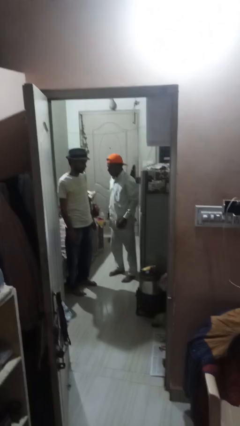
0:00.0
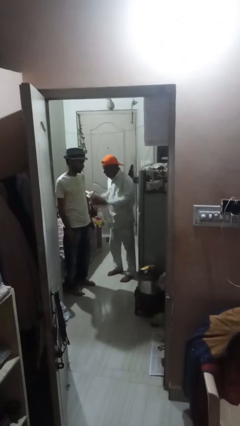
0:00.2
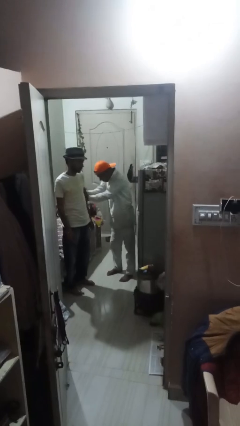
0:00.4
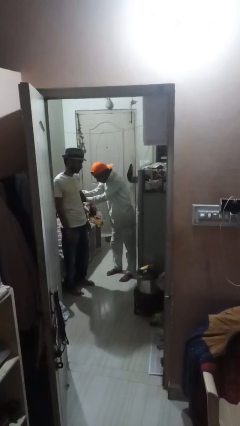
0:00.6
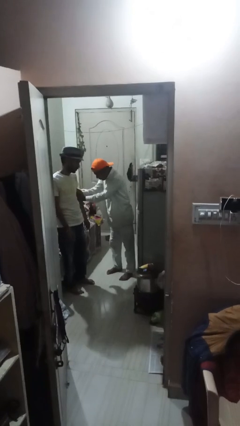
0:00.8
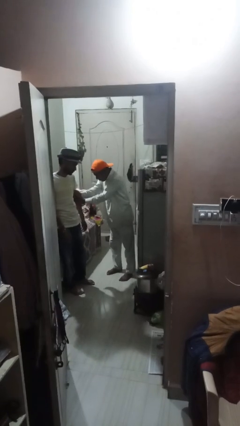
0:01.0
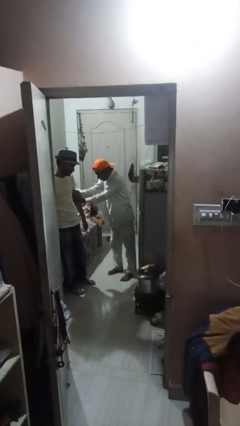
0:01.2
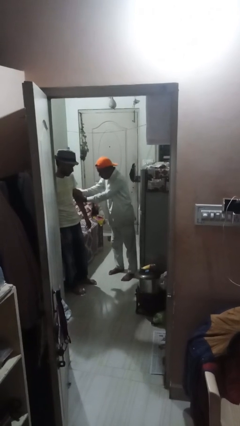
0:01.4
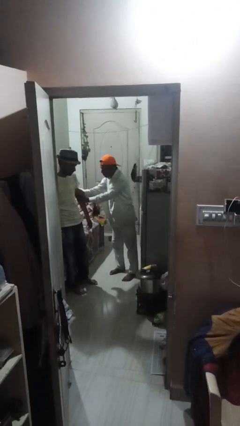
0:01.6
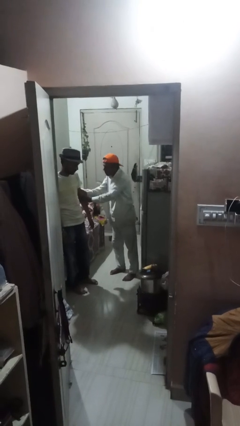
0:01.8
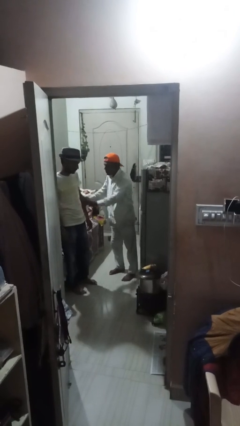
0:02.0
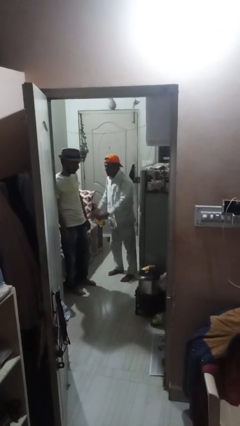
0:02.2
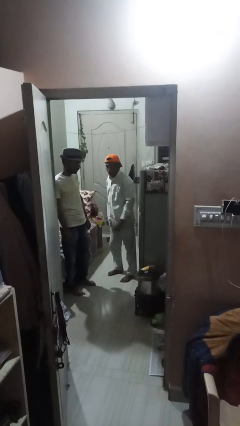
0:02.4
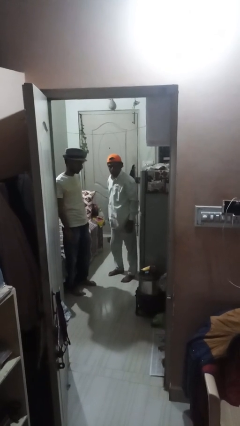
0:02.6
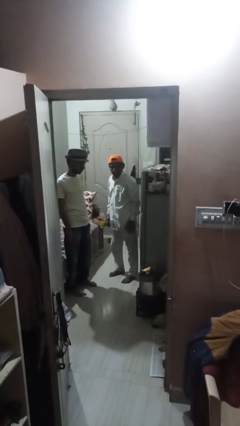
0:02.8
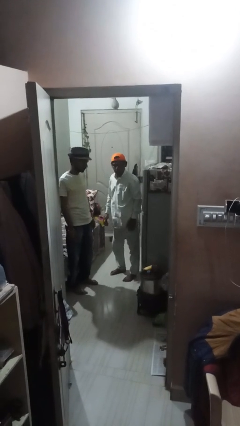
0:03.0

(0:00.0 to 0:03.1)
person shoves person

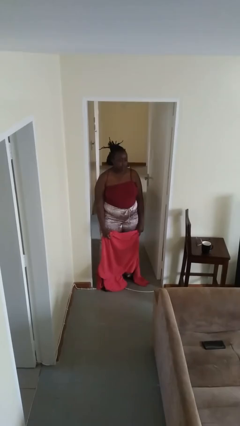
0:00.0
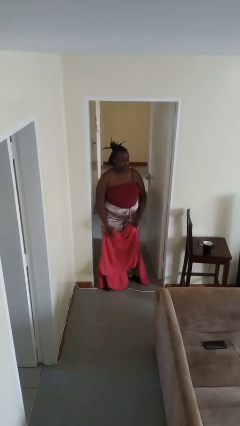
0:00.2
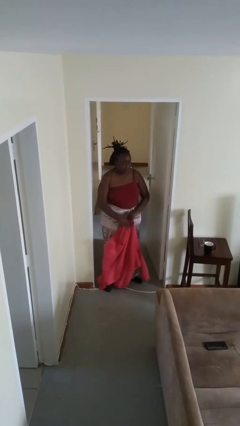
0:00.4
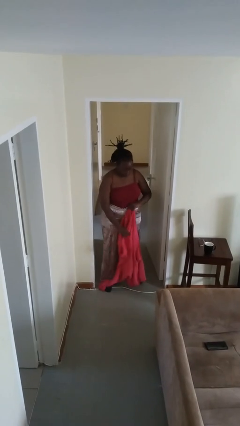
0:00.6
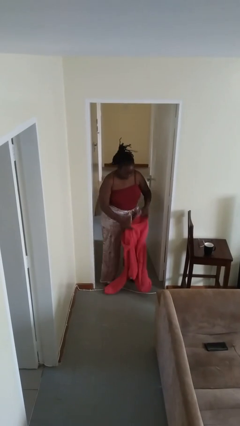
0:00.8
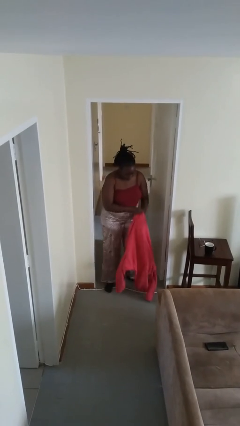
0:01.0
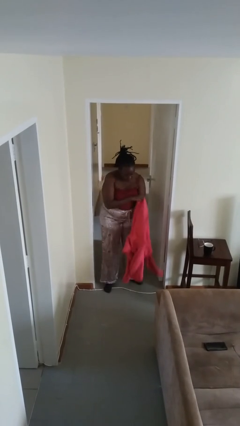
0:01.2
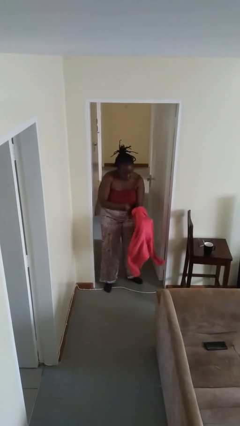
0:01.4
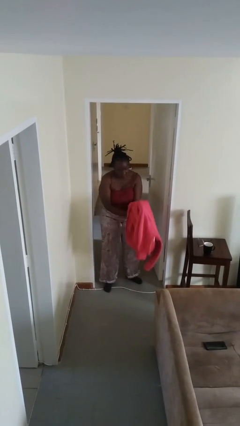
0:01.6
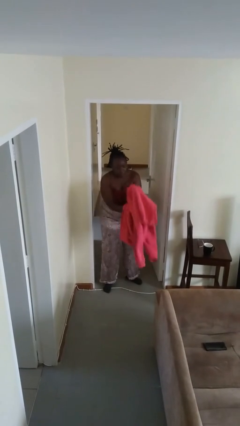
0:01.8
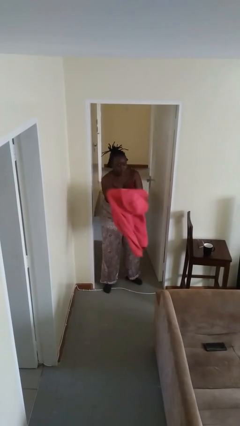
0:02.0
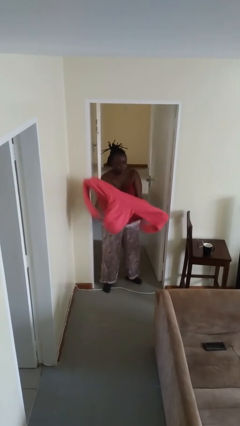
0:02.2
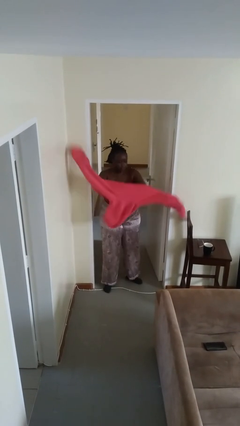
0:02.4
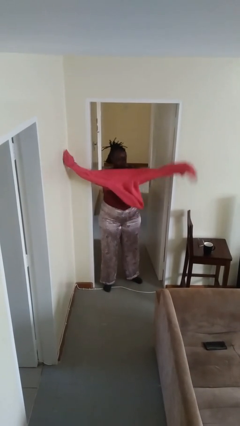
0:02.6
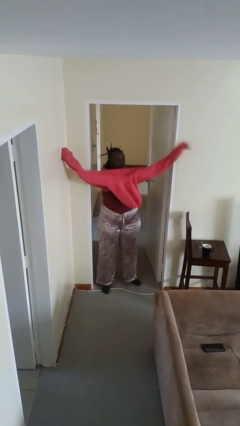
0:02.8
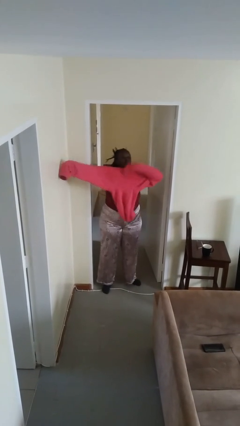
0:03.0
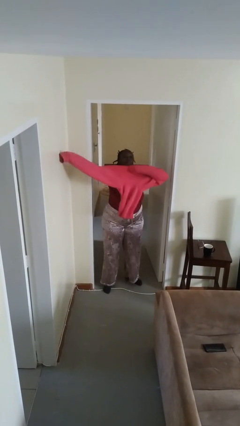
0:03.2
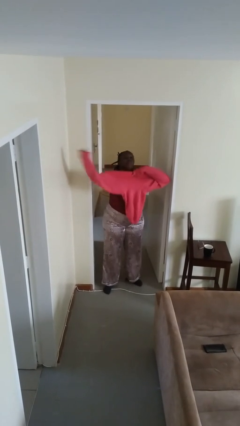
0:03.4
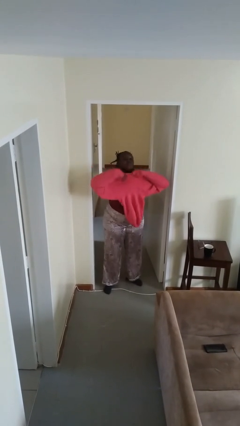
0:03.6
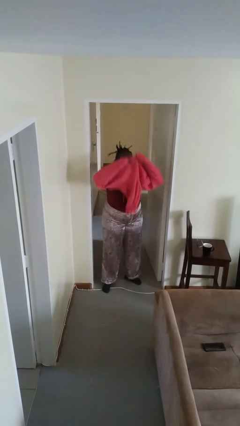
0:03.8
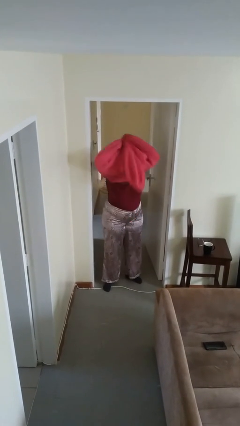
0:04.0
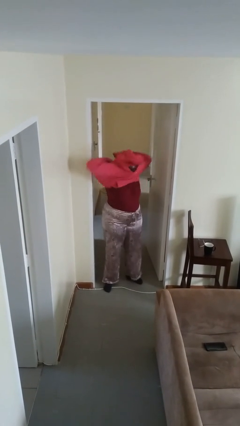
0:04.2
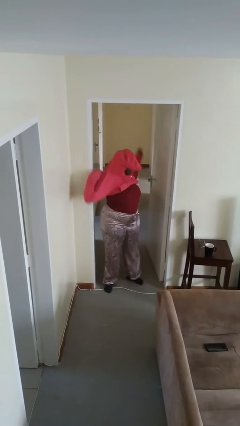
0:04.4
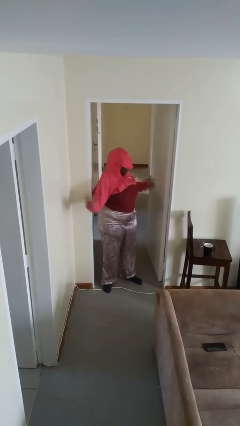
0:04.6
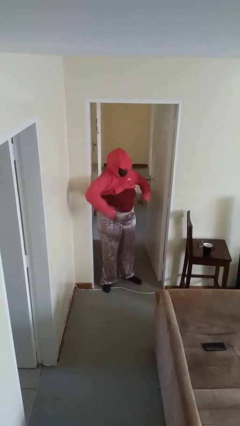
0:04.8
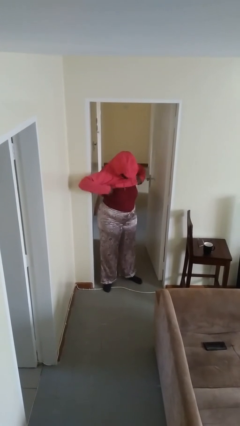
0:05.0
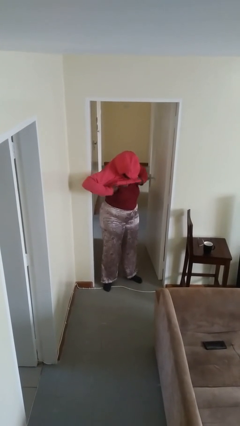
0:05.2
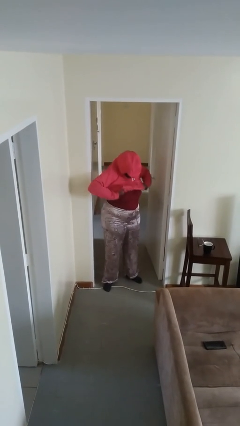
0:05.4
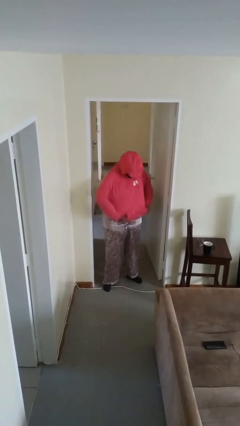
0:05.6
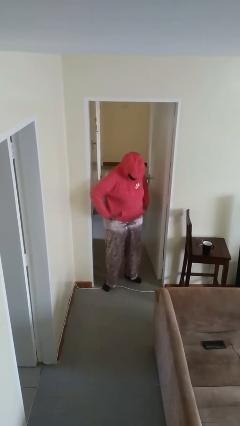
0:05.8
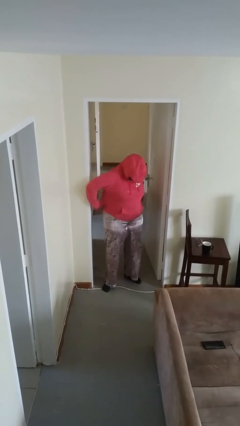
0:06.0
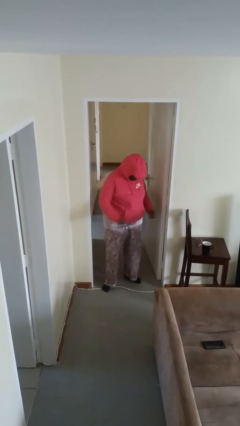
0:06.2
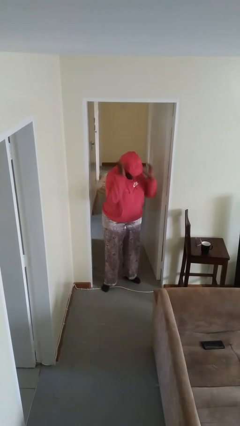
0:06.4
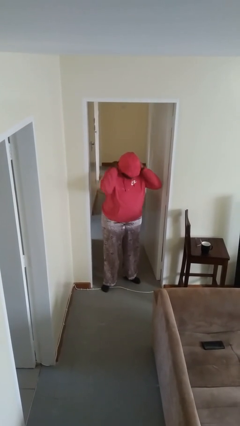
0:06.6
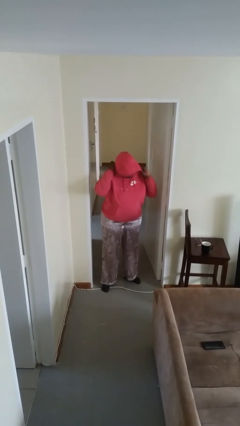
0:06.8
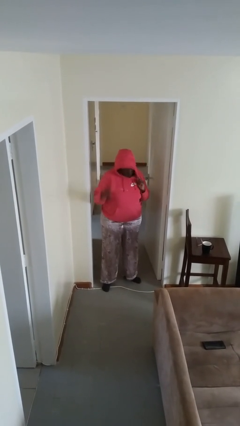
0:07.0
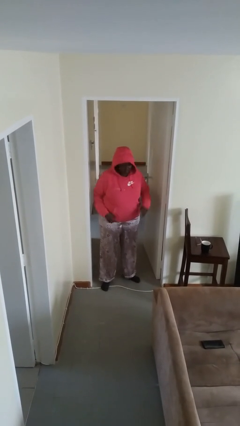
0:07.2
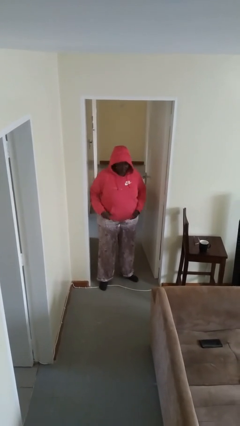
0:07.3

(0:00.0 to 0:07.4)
person puts on hoodie

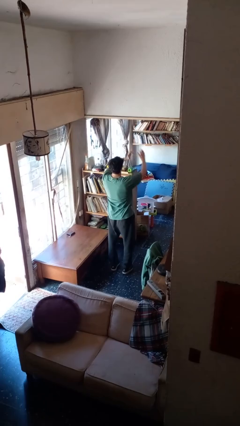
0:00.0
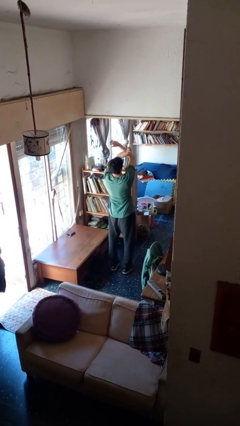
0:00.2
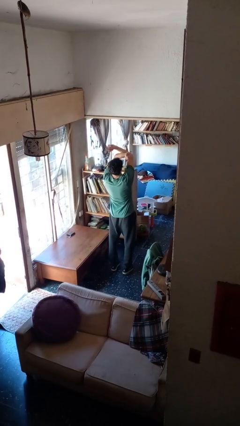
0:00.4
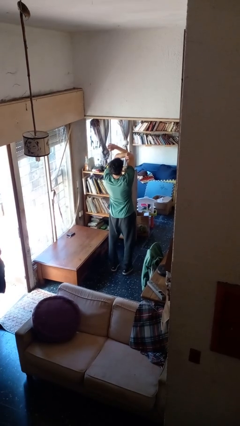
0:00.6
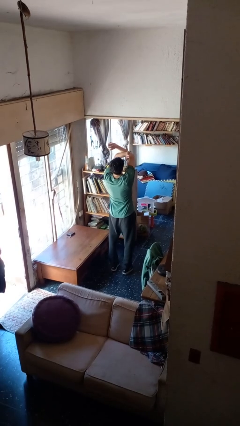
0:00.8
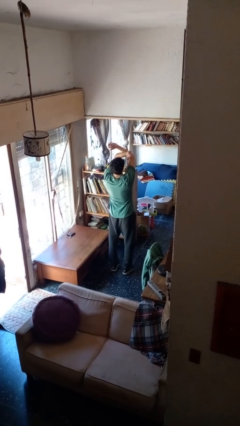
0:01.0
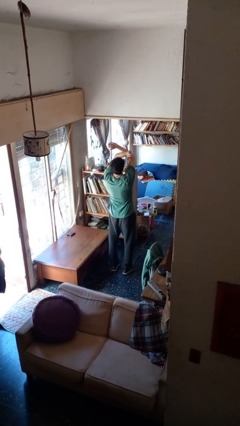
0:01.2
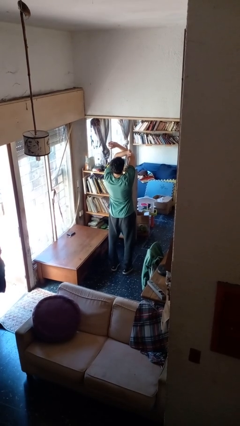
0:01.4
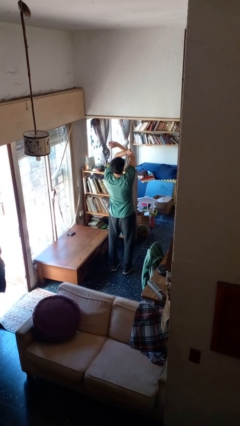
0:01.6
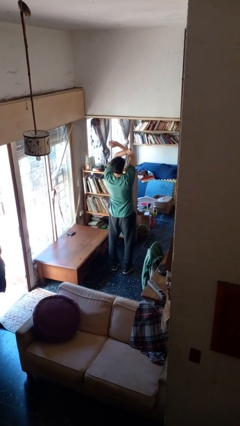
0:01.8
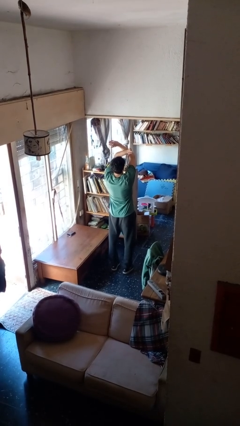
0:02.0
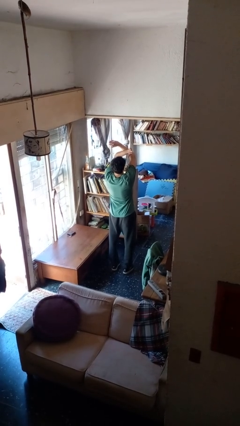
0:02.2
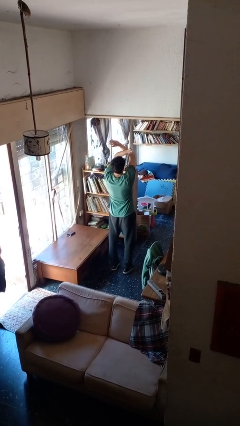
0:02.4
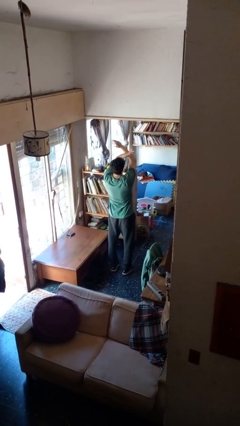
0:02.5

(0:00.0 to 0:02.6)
person gestures arms x

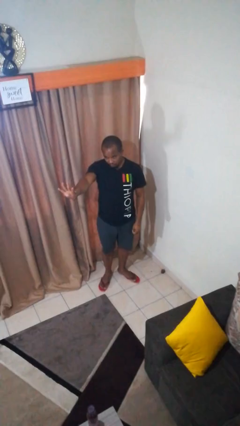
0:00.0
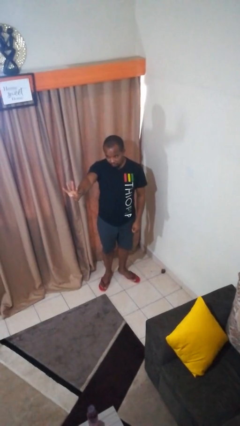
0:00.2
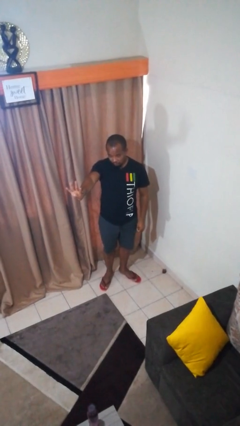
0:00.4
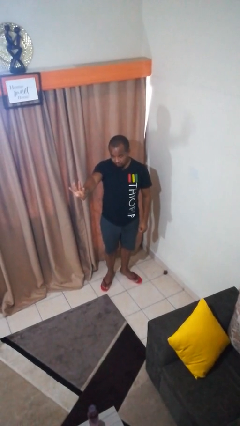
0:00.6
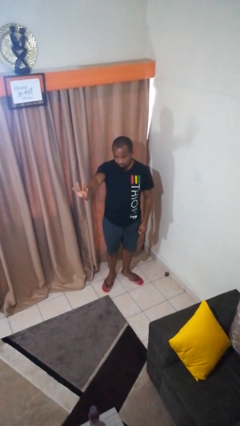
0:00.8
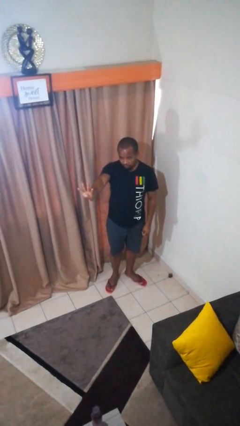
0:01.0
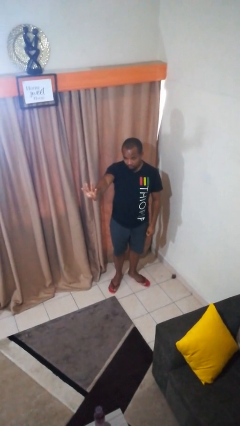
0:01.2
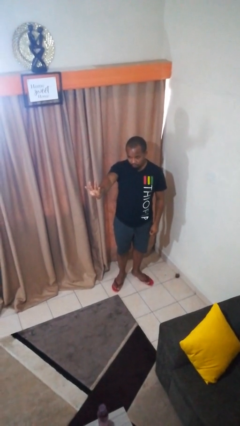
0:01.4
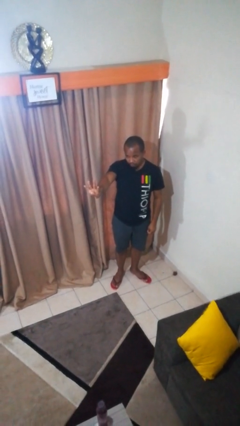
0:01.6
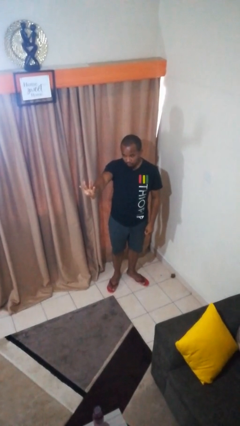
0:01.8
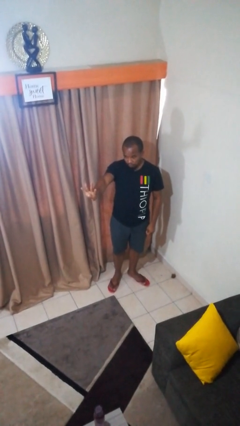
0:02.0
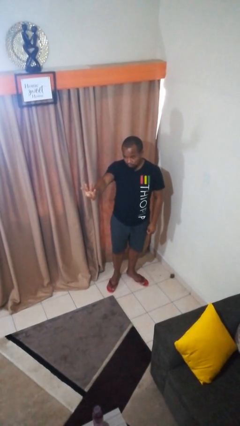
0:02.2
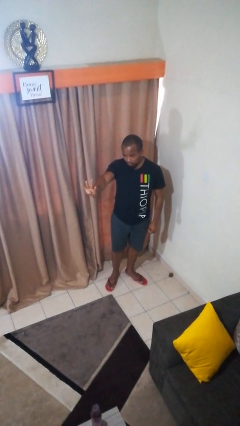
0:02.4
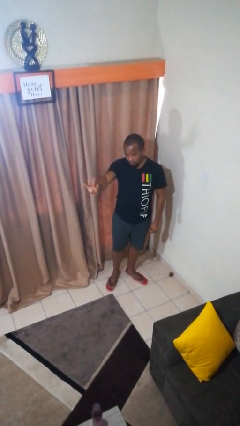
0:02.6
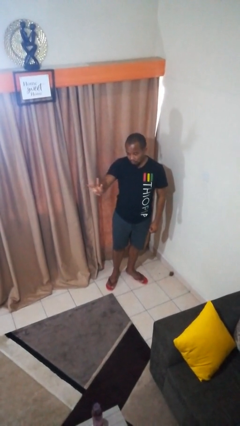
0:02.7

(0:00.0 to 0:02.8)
person gestures number four

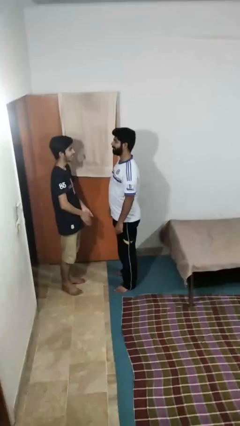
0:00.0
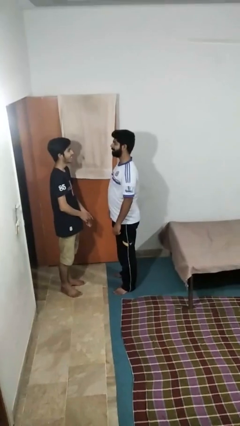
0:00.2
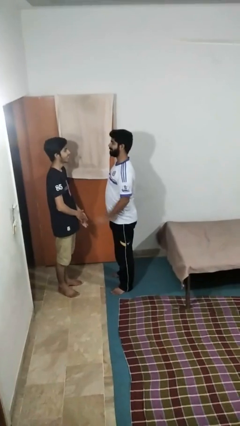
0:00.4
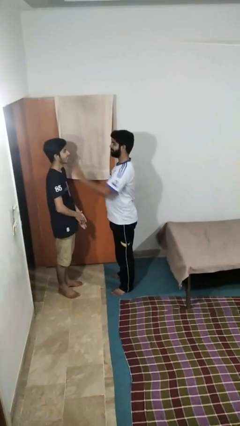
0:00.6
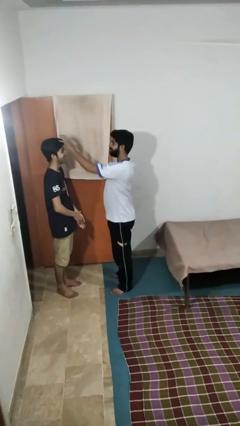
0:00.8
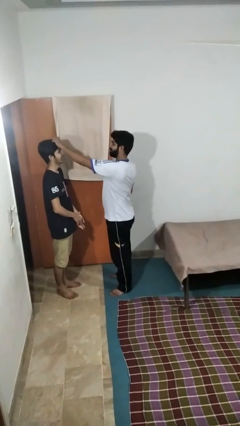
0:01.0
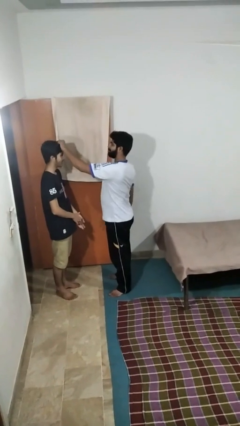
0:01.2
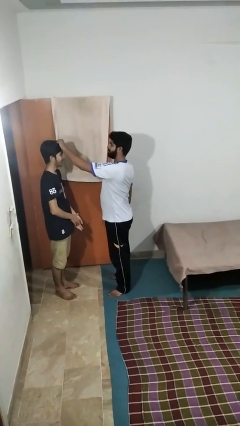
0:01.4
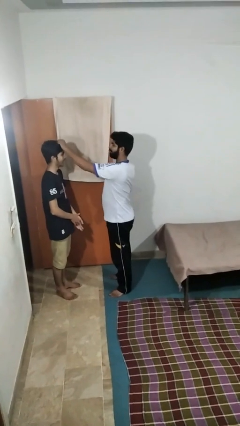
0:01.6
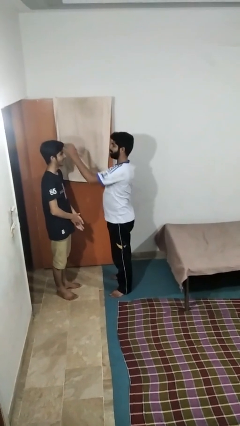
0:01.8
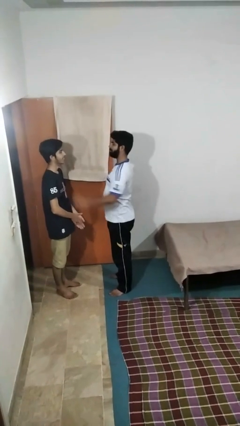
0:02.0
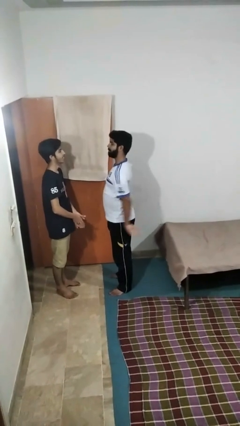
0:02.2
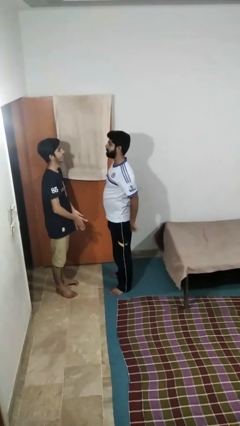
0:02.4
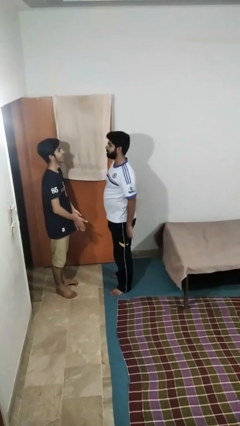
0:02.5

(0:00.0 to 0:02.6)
person grabs person by hair
